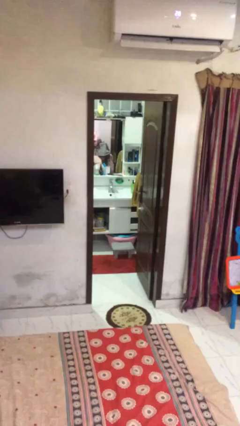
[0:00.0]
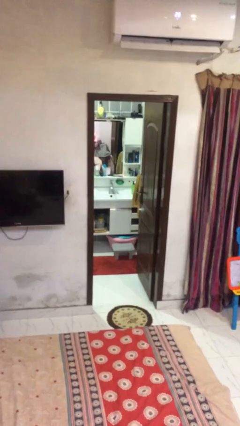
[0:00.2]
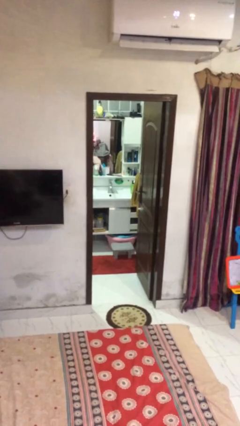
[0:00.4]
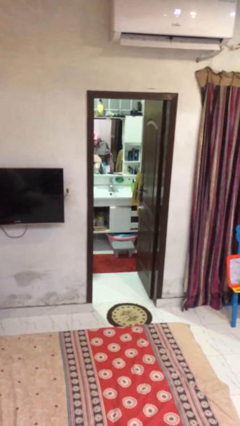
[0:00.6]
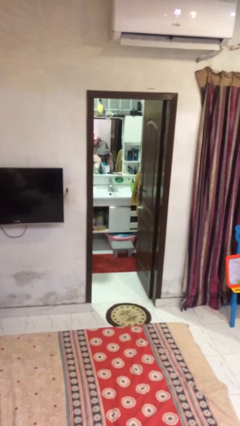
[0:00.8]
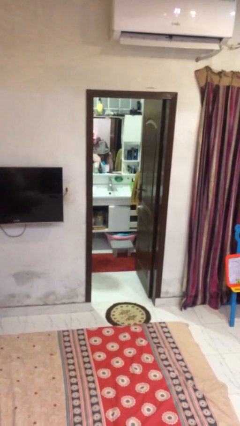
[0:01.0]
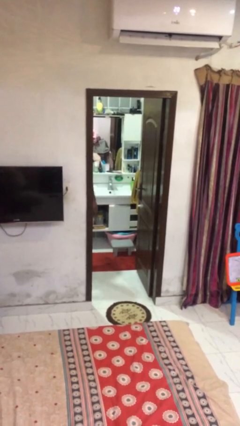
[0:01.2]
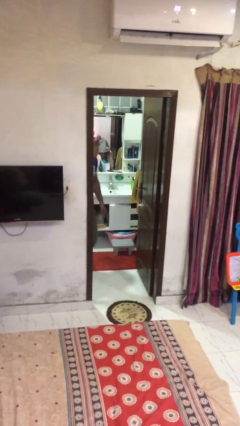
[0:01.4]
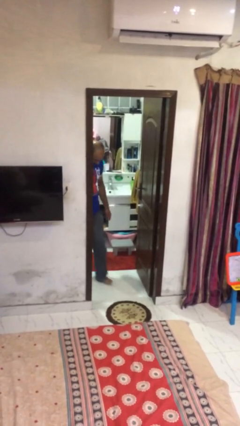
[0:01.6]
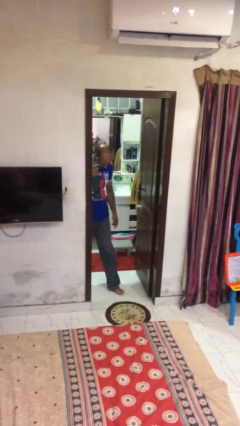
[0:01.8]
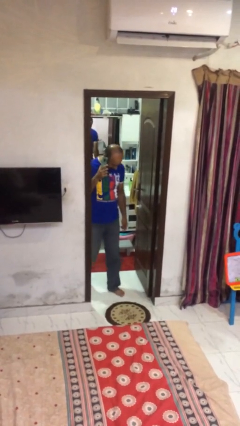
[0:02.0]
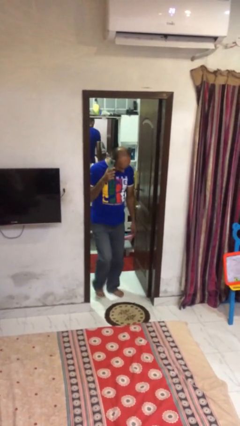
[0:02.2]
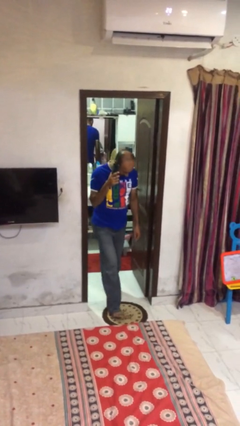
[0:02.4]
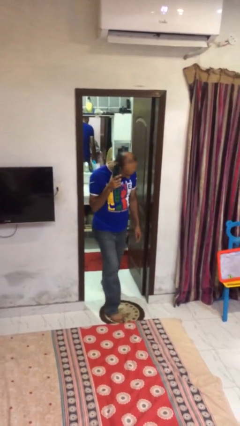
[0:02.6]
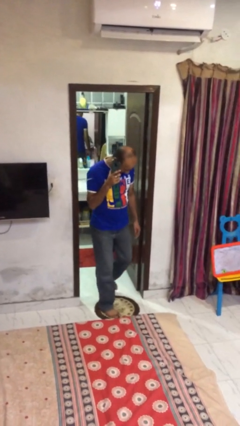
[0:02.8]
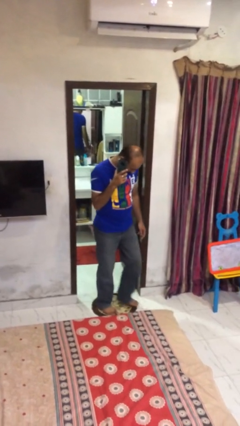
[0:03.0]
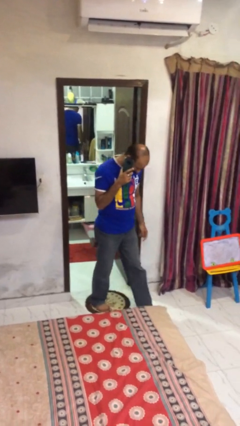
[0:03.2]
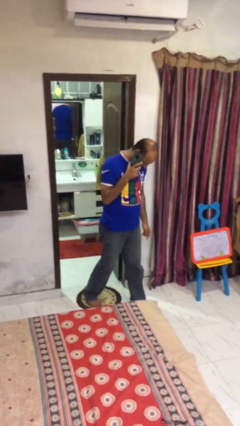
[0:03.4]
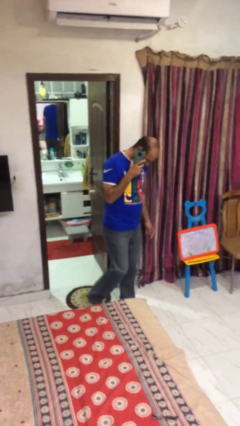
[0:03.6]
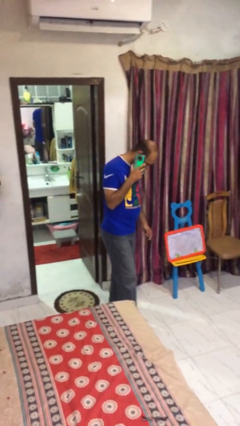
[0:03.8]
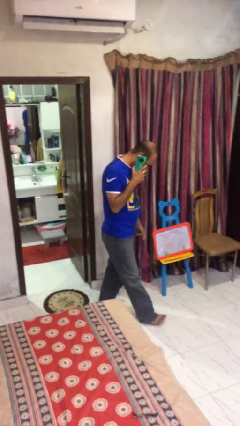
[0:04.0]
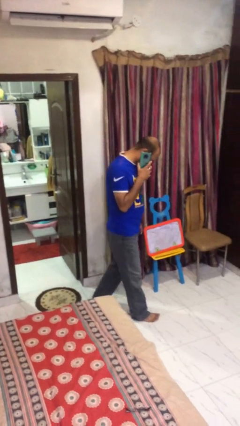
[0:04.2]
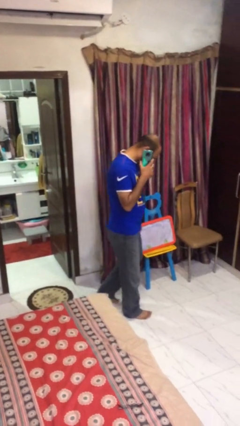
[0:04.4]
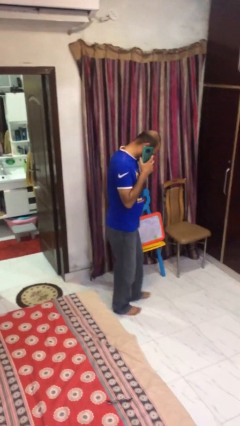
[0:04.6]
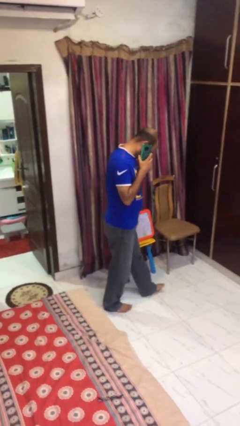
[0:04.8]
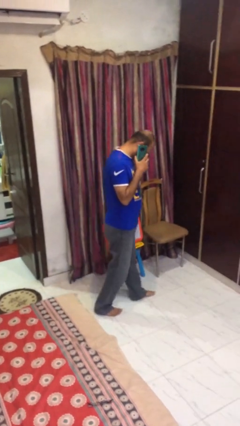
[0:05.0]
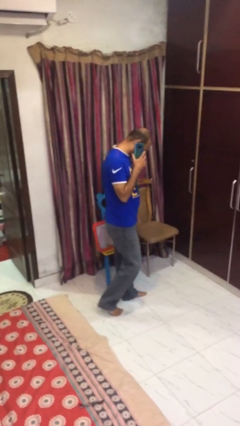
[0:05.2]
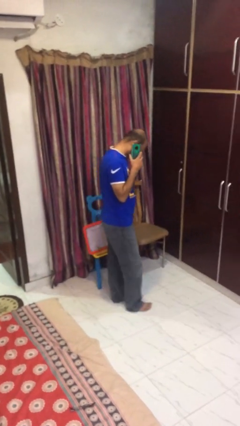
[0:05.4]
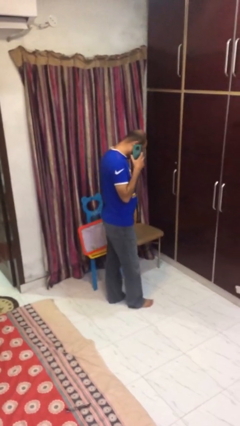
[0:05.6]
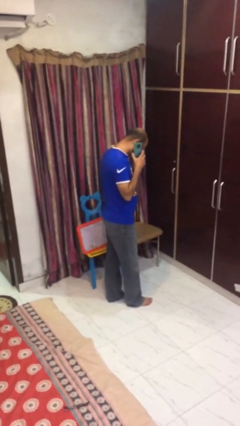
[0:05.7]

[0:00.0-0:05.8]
person enters scene through structure

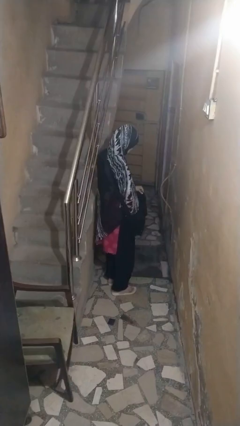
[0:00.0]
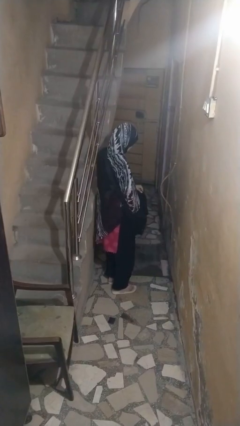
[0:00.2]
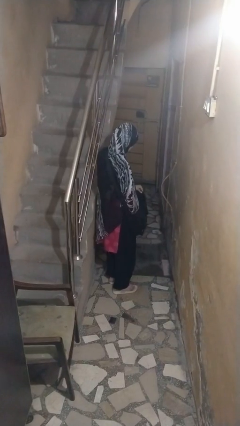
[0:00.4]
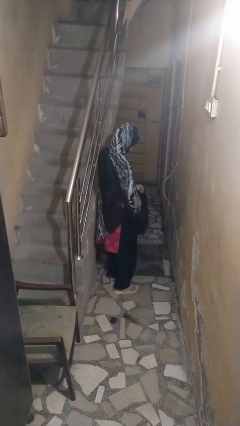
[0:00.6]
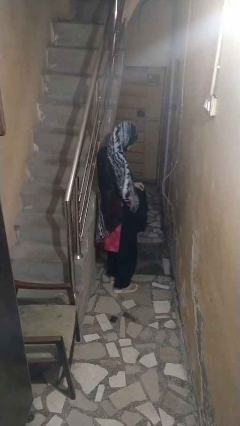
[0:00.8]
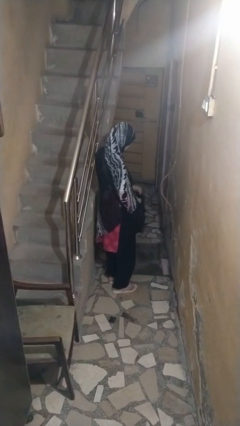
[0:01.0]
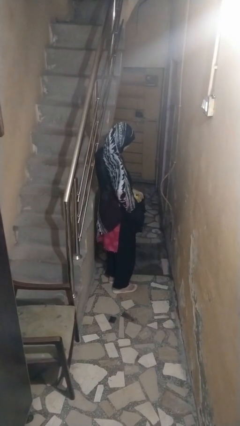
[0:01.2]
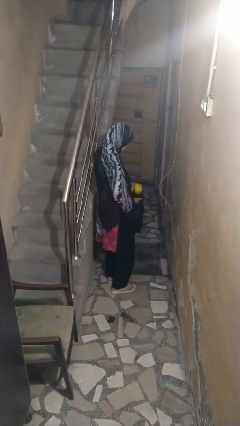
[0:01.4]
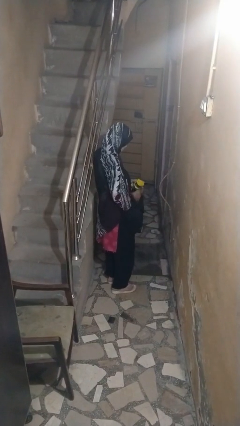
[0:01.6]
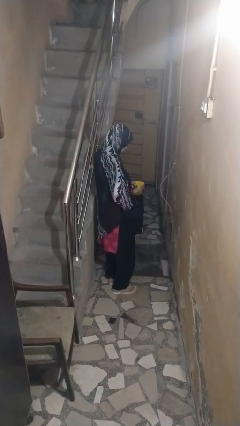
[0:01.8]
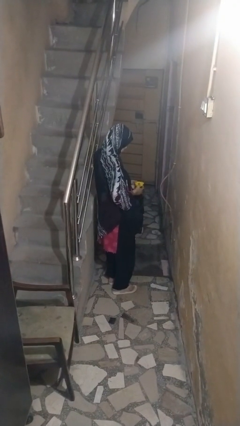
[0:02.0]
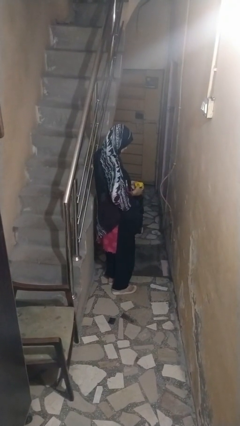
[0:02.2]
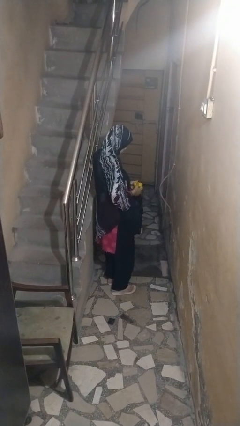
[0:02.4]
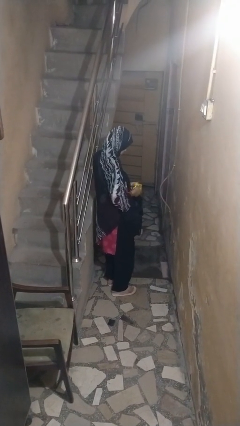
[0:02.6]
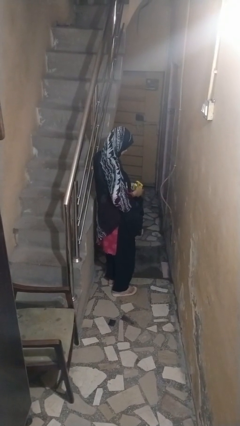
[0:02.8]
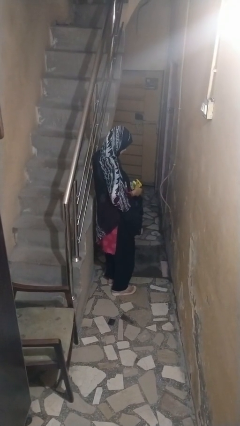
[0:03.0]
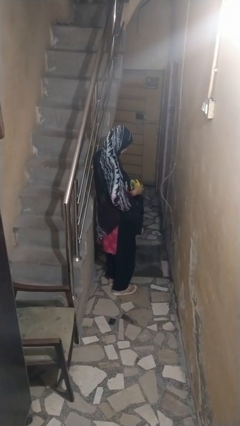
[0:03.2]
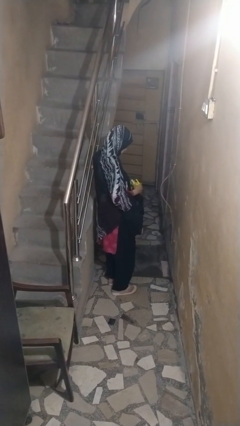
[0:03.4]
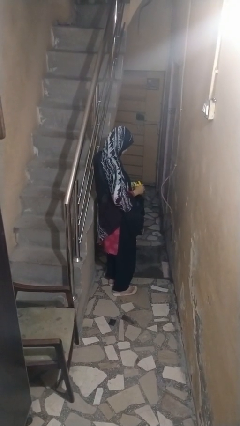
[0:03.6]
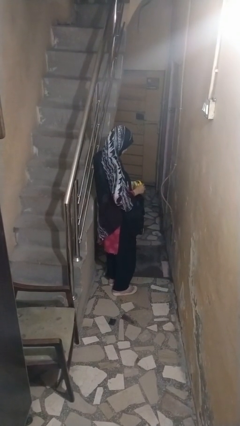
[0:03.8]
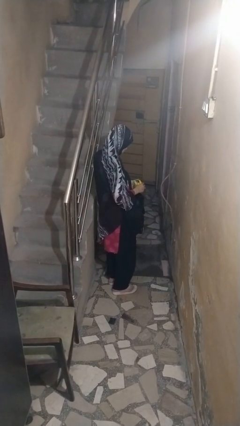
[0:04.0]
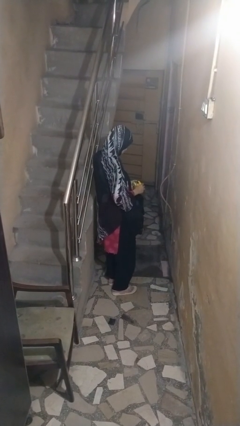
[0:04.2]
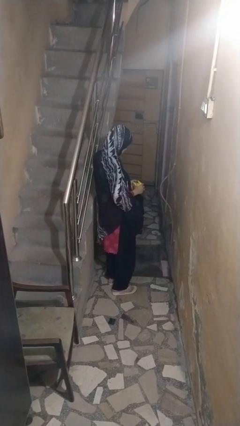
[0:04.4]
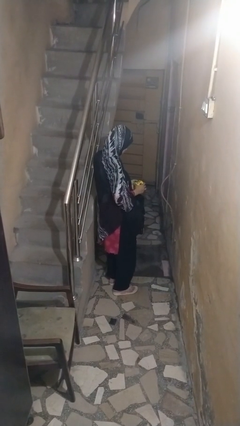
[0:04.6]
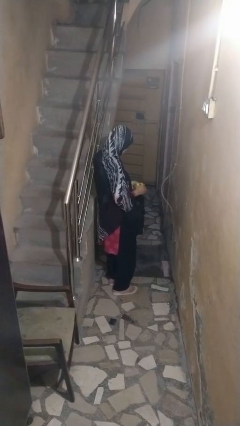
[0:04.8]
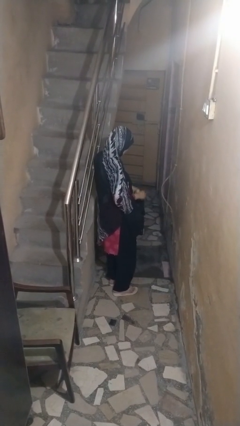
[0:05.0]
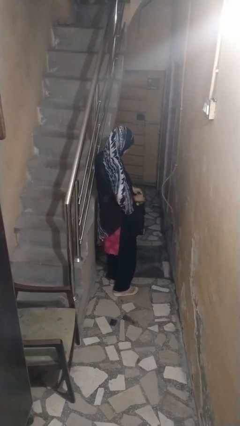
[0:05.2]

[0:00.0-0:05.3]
person takes object from backpack

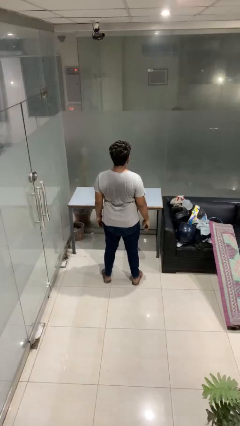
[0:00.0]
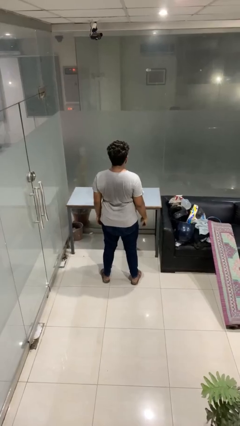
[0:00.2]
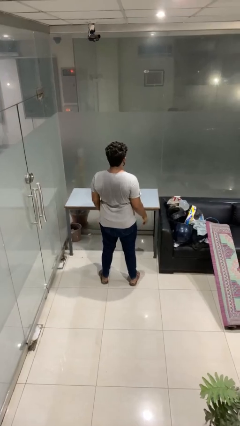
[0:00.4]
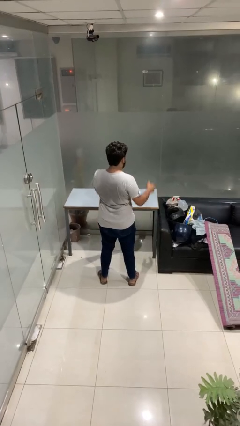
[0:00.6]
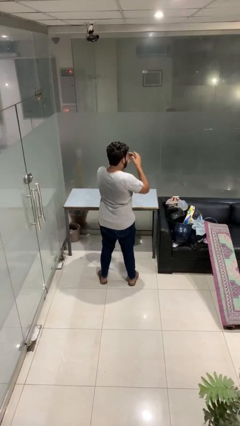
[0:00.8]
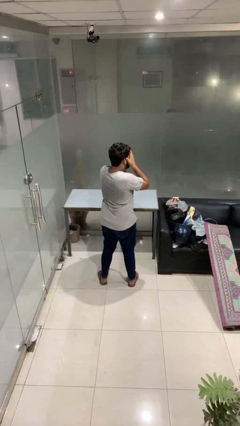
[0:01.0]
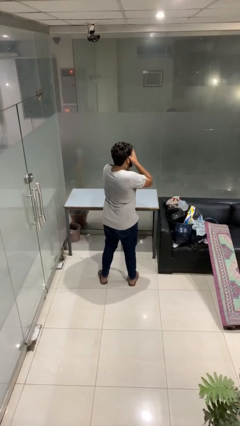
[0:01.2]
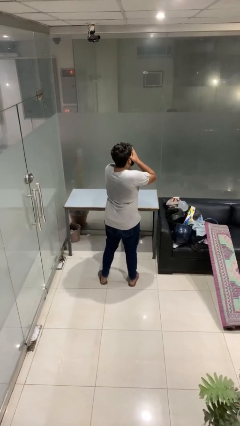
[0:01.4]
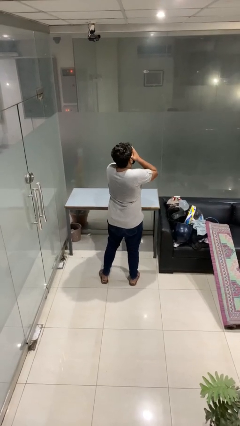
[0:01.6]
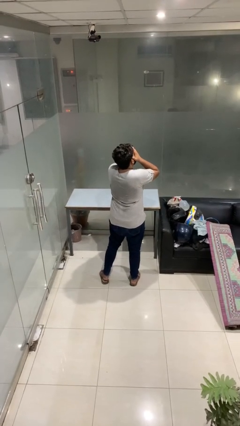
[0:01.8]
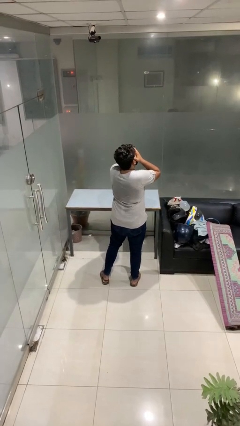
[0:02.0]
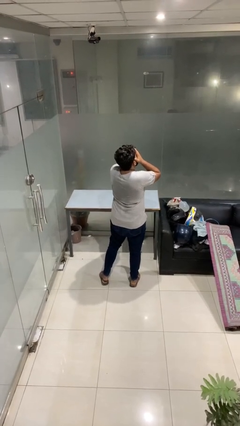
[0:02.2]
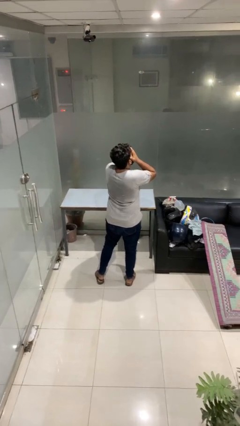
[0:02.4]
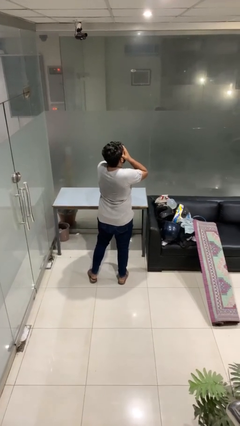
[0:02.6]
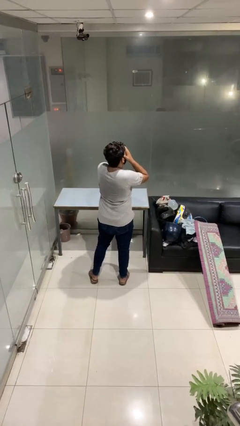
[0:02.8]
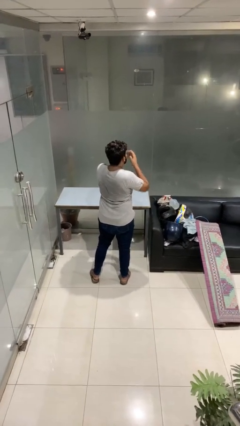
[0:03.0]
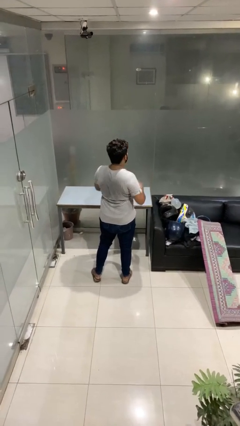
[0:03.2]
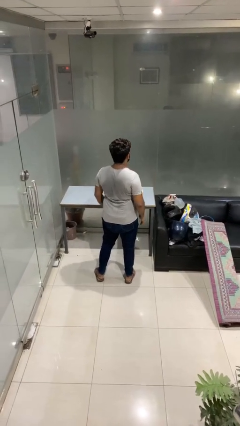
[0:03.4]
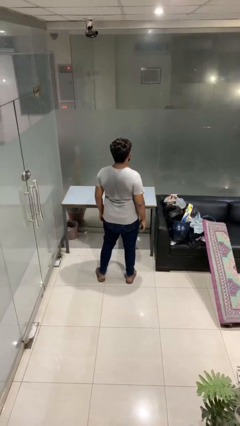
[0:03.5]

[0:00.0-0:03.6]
person covers face with hands

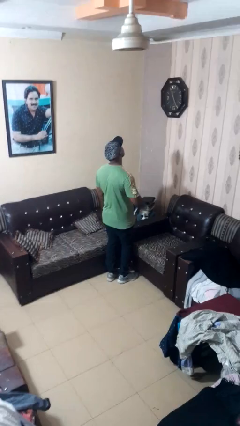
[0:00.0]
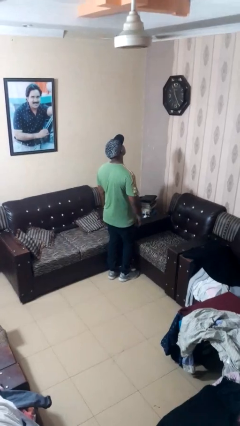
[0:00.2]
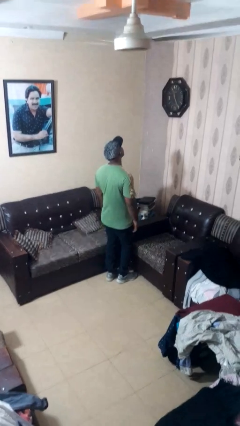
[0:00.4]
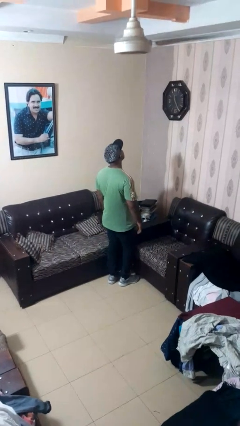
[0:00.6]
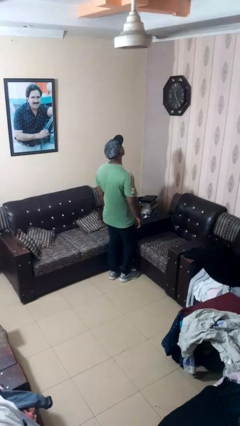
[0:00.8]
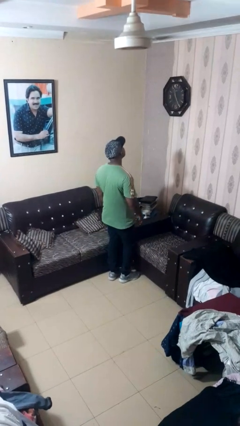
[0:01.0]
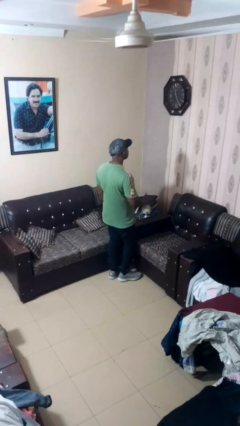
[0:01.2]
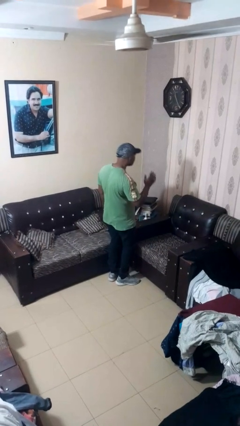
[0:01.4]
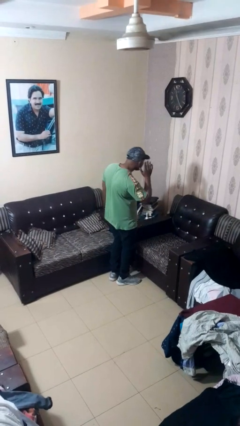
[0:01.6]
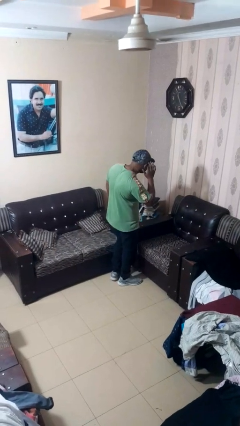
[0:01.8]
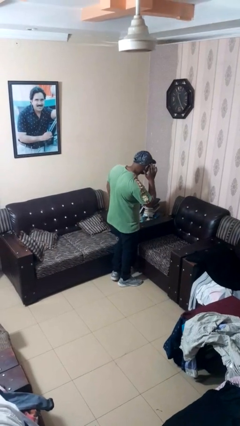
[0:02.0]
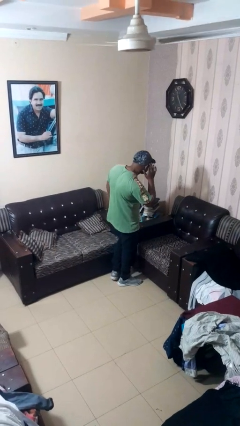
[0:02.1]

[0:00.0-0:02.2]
person gestures listen closely

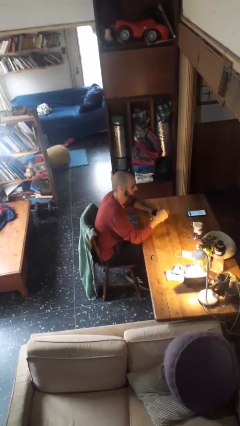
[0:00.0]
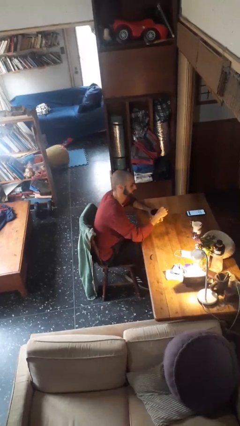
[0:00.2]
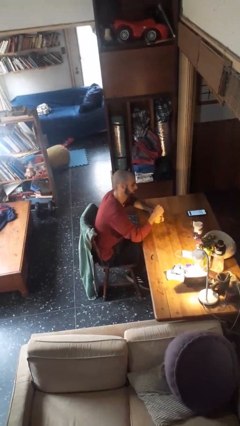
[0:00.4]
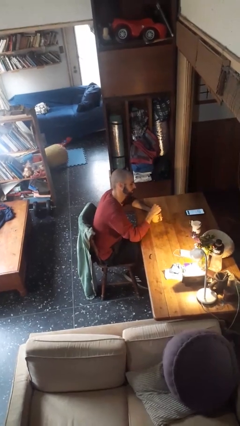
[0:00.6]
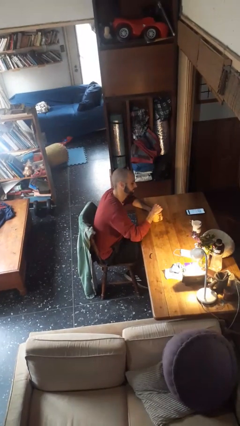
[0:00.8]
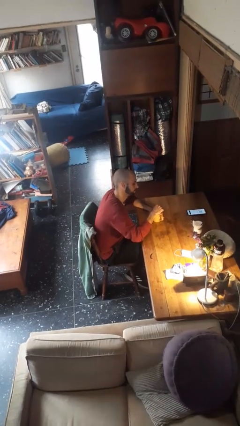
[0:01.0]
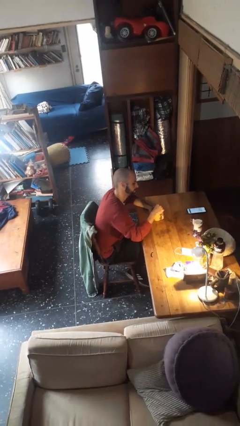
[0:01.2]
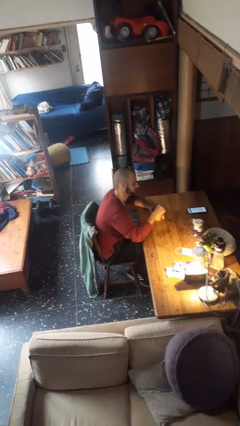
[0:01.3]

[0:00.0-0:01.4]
person stirs mug
